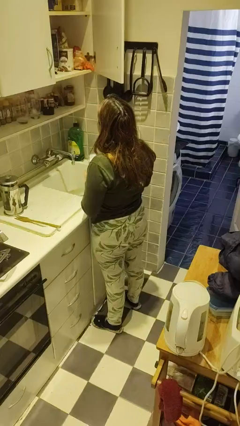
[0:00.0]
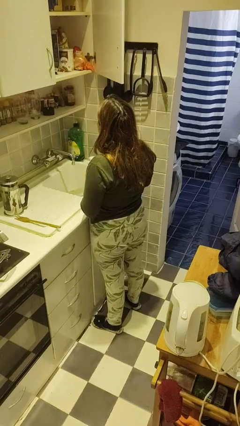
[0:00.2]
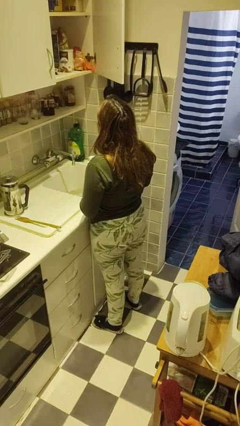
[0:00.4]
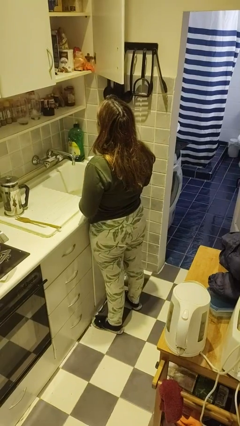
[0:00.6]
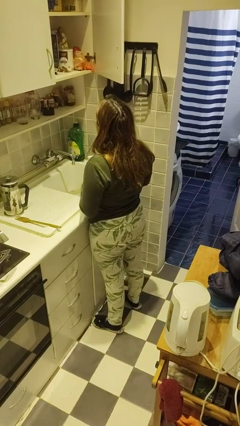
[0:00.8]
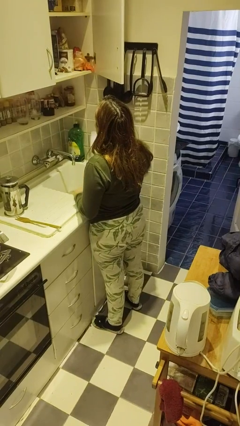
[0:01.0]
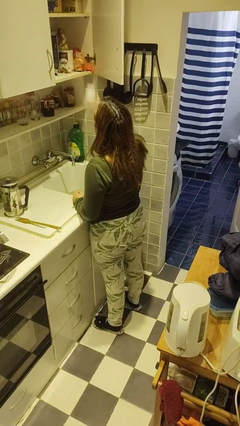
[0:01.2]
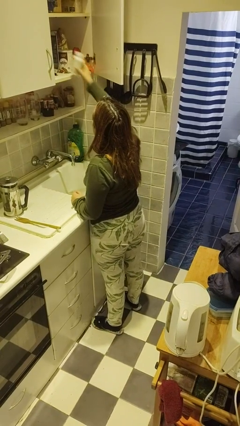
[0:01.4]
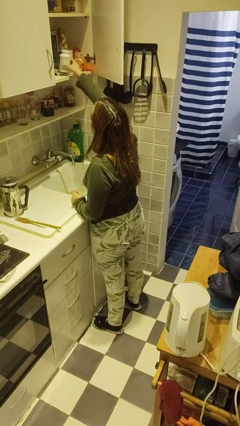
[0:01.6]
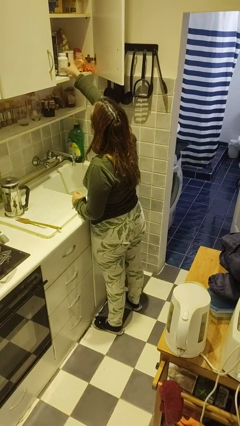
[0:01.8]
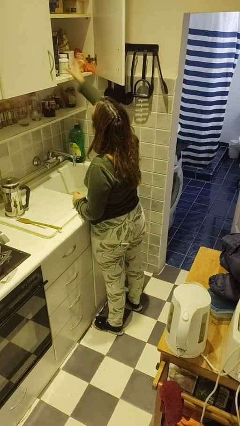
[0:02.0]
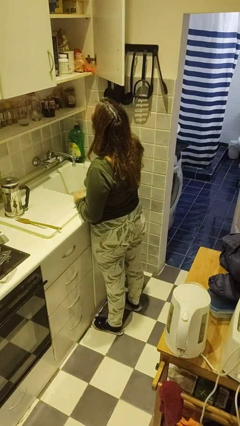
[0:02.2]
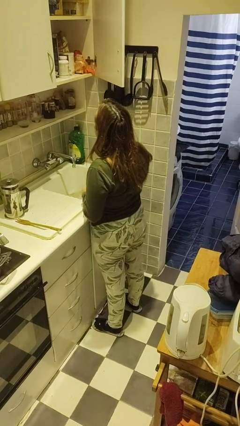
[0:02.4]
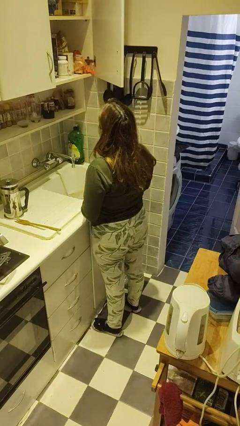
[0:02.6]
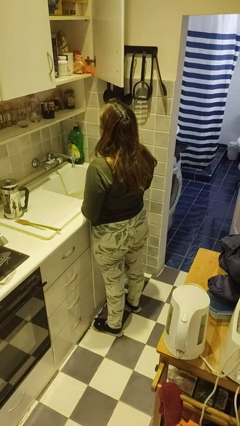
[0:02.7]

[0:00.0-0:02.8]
person puts object in cabinet

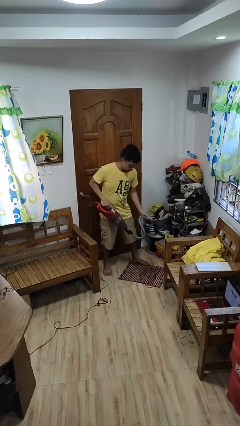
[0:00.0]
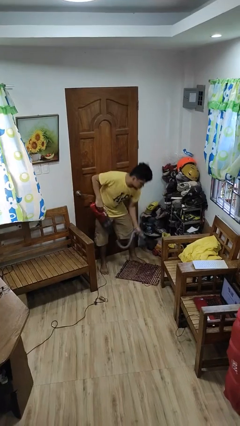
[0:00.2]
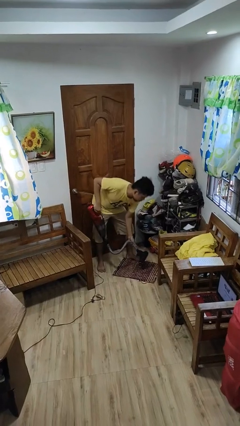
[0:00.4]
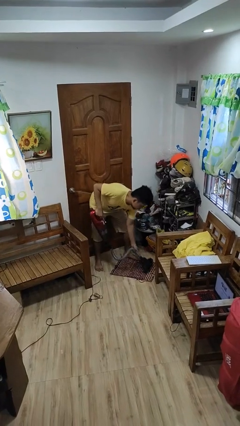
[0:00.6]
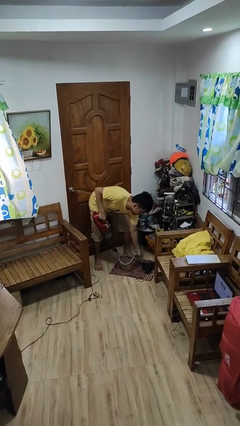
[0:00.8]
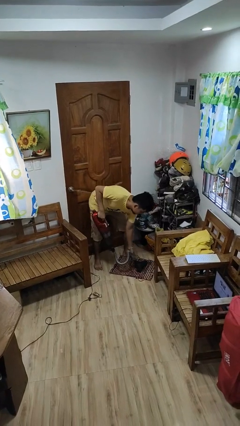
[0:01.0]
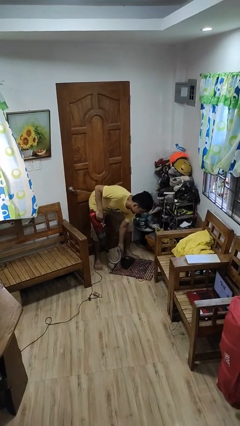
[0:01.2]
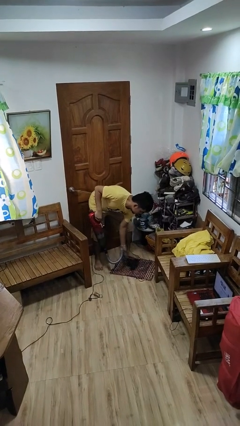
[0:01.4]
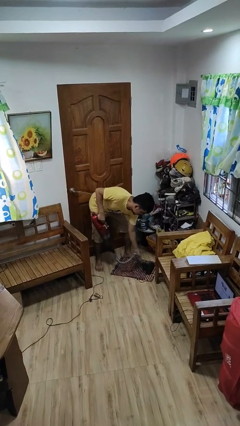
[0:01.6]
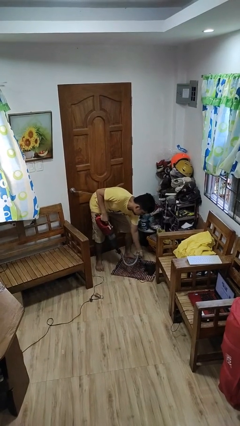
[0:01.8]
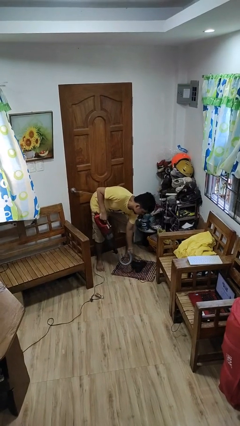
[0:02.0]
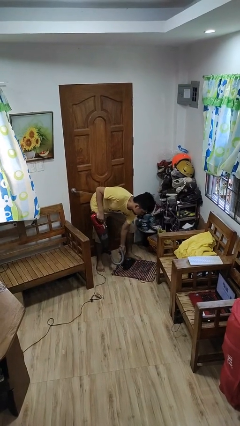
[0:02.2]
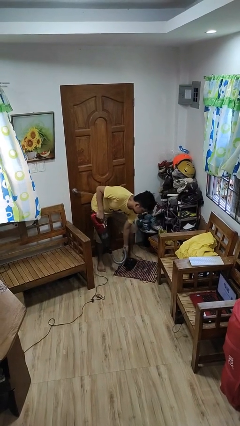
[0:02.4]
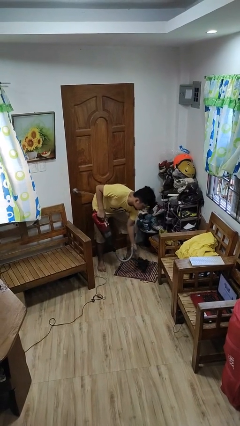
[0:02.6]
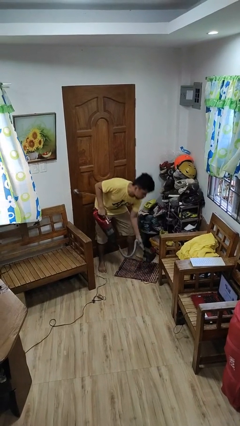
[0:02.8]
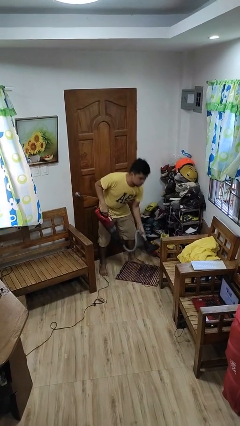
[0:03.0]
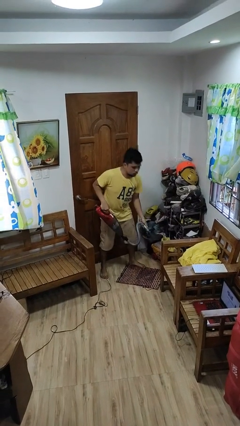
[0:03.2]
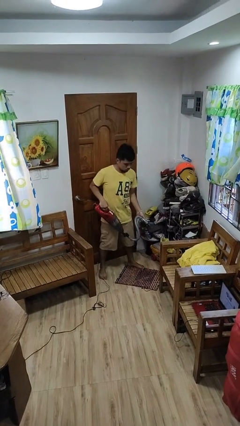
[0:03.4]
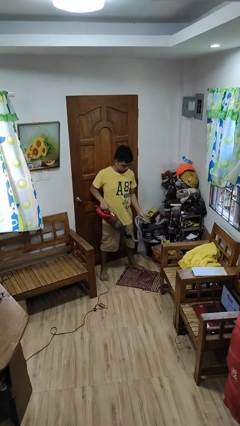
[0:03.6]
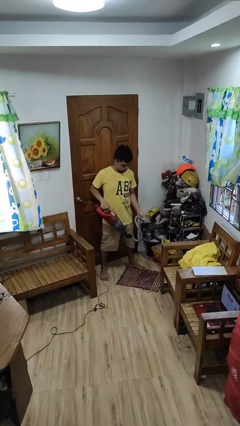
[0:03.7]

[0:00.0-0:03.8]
person vacuums carpet

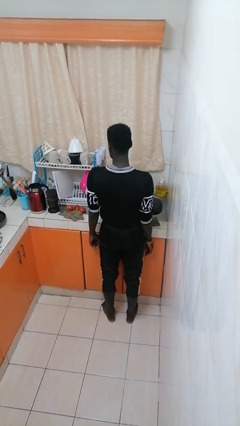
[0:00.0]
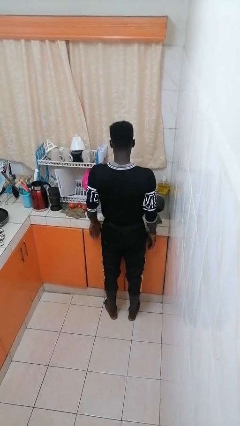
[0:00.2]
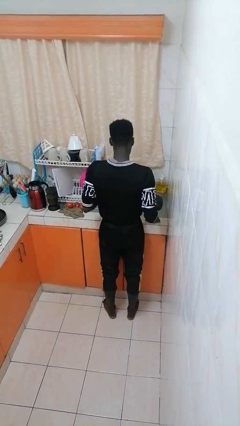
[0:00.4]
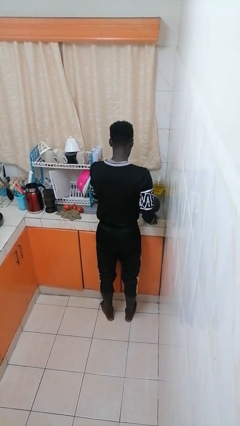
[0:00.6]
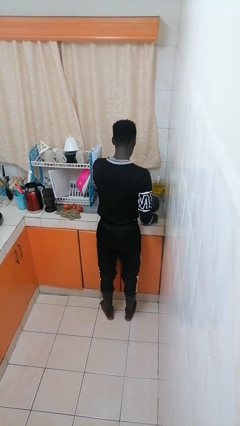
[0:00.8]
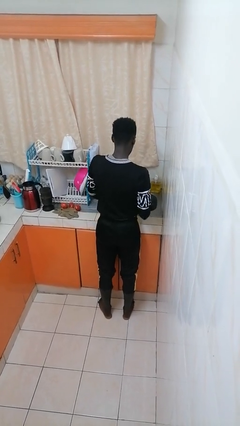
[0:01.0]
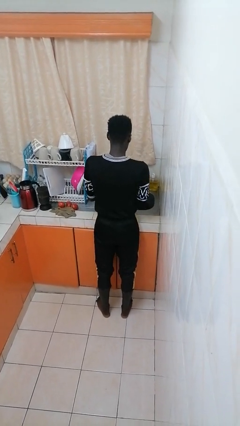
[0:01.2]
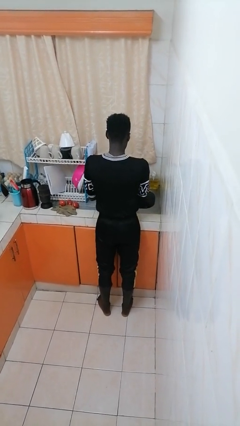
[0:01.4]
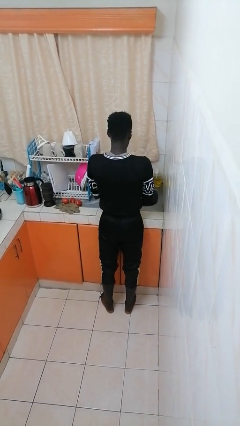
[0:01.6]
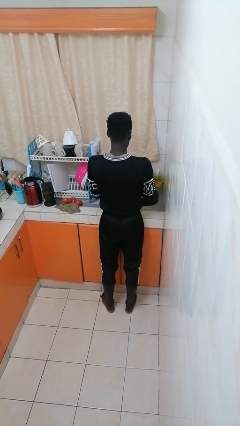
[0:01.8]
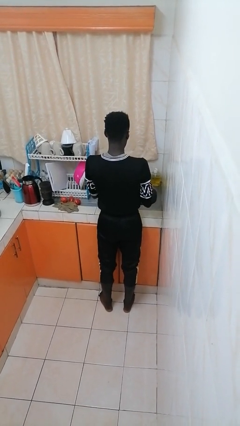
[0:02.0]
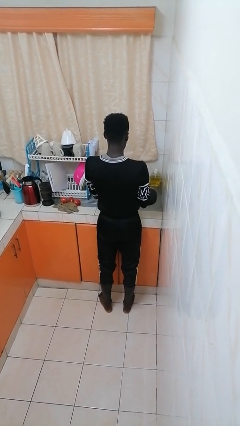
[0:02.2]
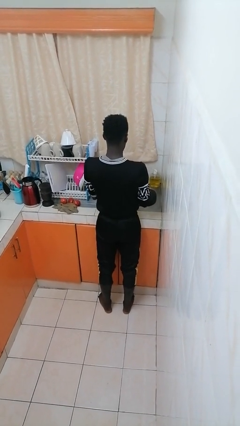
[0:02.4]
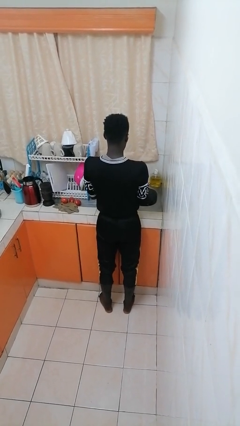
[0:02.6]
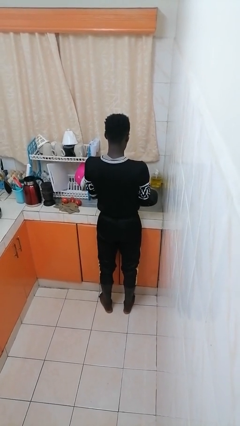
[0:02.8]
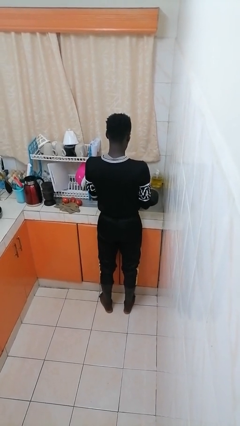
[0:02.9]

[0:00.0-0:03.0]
person washes dish

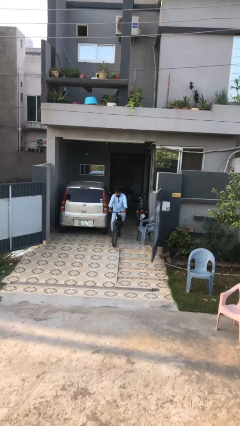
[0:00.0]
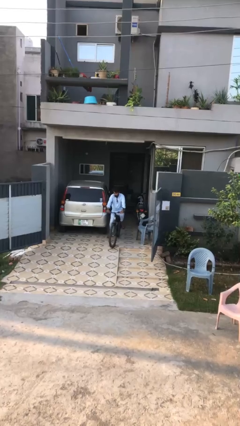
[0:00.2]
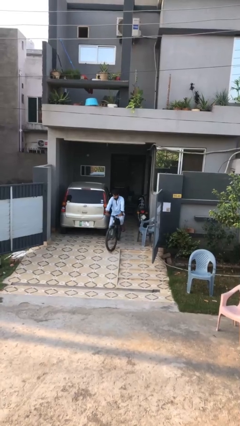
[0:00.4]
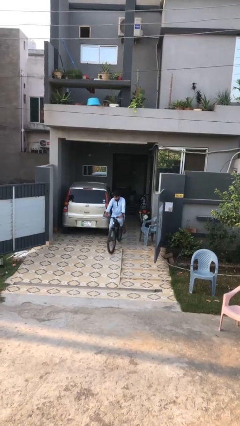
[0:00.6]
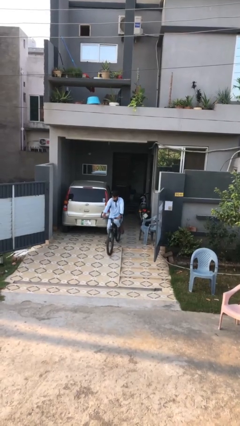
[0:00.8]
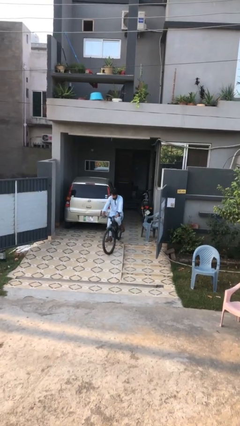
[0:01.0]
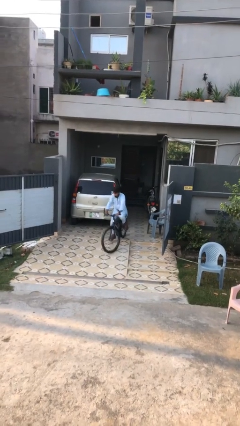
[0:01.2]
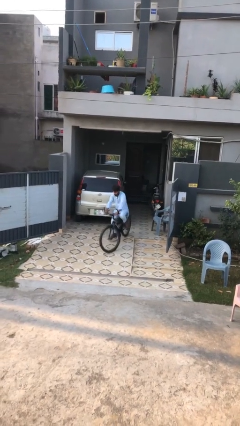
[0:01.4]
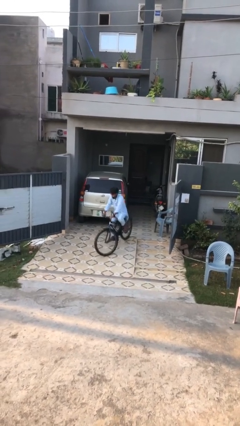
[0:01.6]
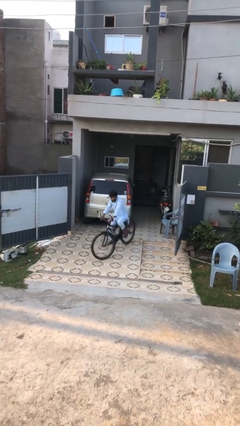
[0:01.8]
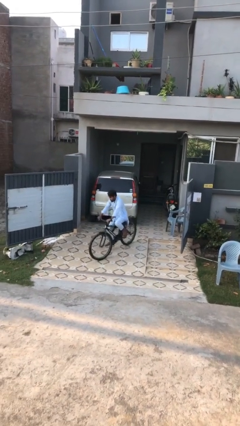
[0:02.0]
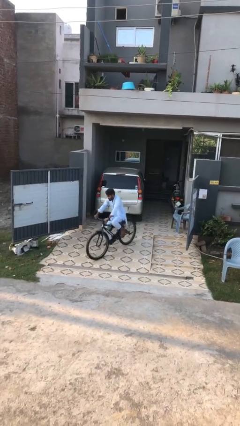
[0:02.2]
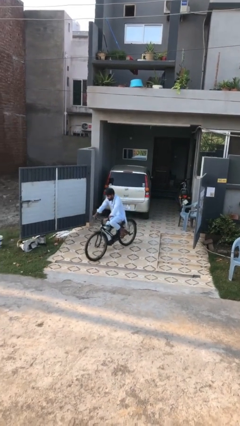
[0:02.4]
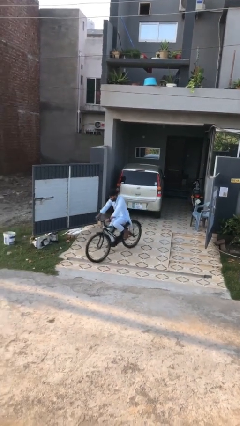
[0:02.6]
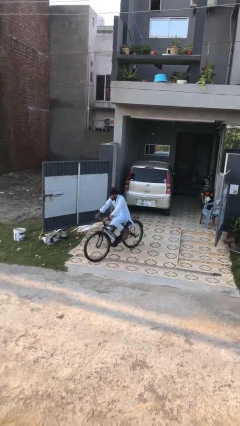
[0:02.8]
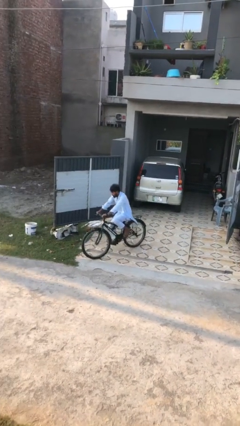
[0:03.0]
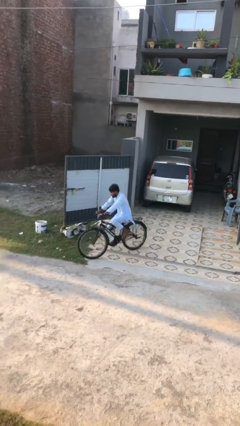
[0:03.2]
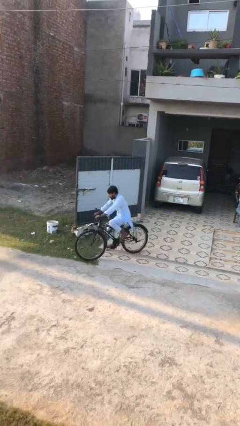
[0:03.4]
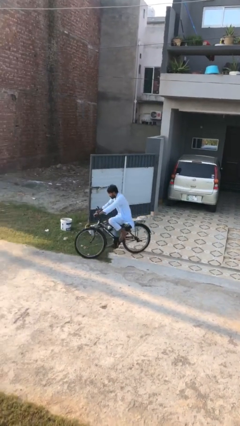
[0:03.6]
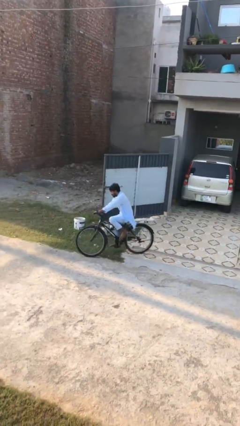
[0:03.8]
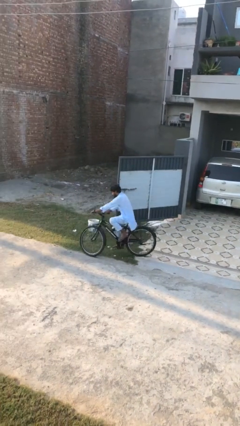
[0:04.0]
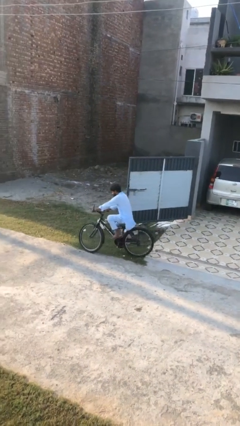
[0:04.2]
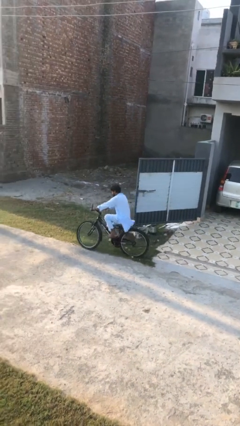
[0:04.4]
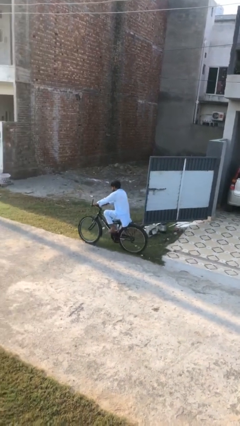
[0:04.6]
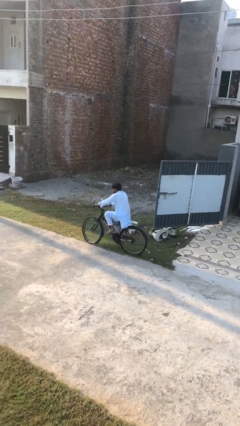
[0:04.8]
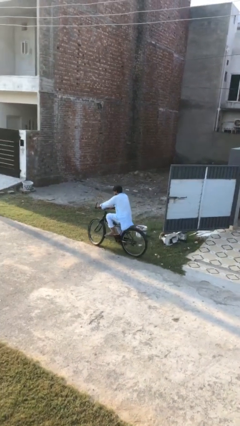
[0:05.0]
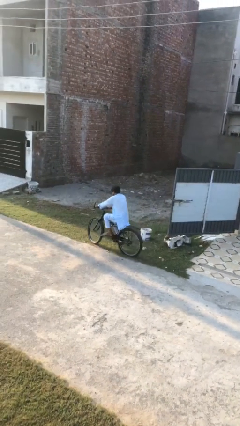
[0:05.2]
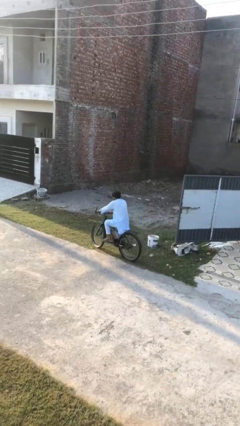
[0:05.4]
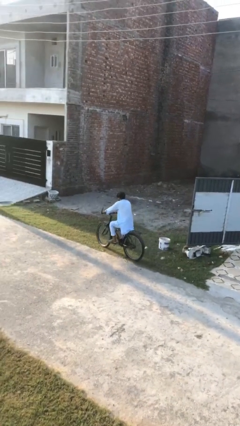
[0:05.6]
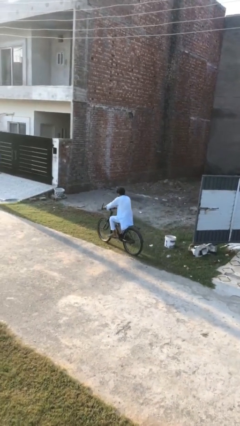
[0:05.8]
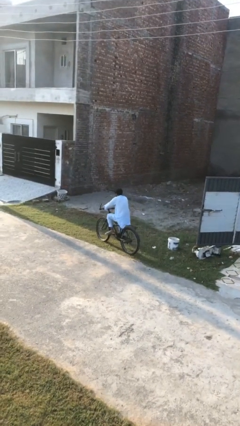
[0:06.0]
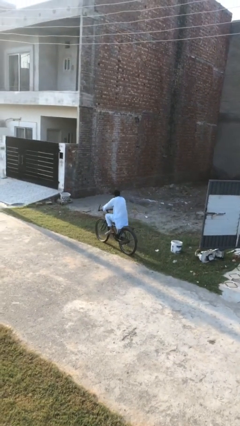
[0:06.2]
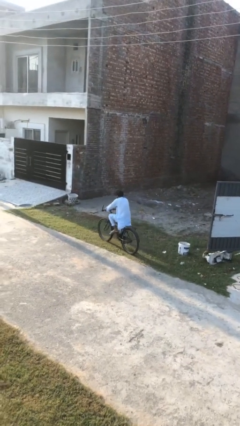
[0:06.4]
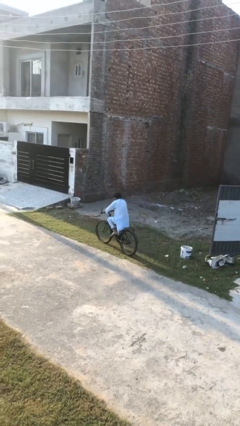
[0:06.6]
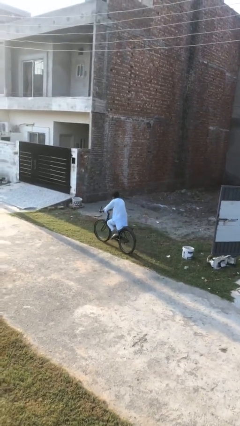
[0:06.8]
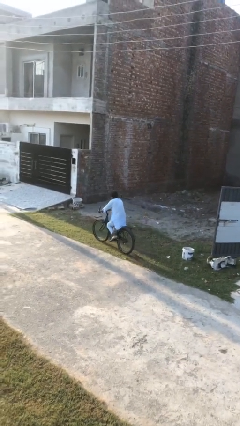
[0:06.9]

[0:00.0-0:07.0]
person rides bicycle

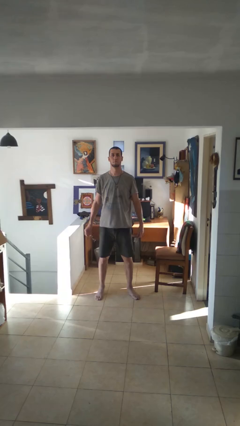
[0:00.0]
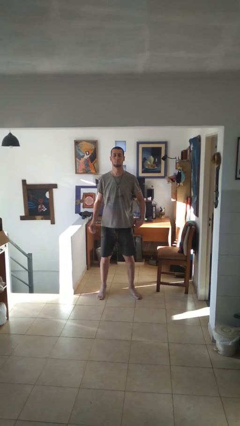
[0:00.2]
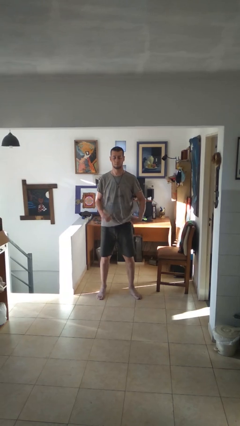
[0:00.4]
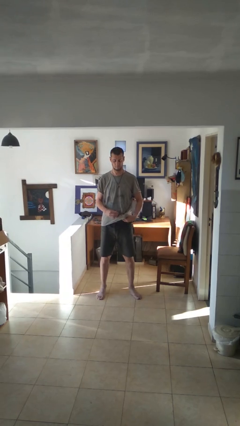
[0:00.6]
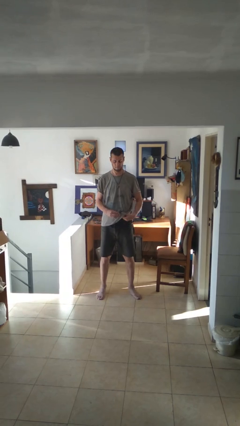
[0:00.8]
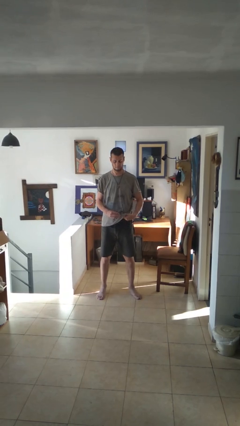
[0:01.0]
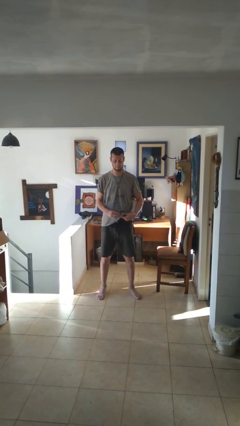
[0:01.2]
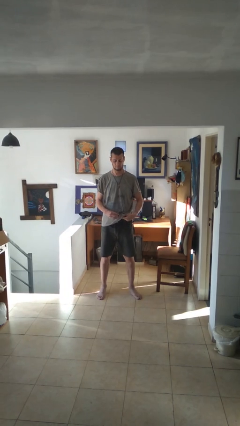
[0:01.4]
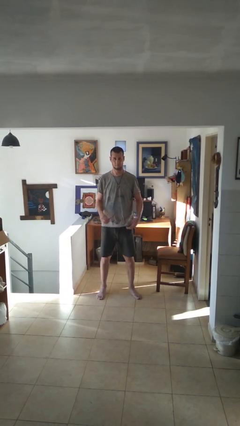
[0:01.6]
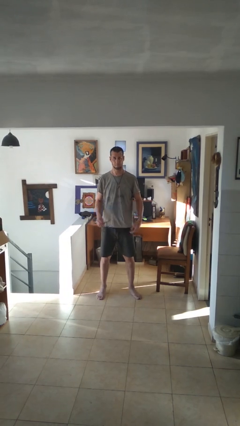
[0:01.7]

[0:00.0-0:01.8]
person cleans eyeglasses
